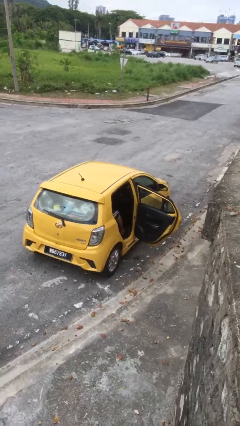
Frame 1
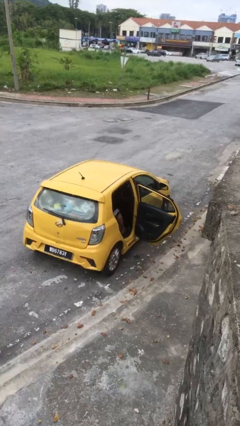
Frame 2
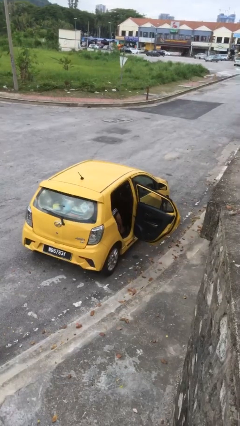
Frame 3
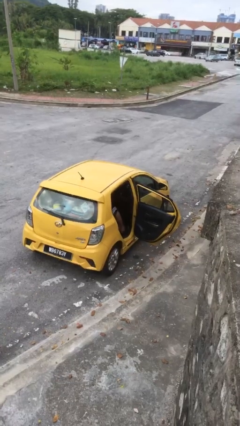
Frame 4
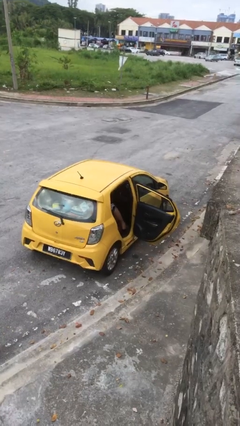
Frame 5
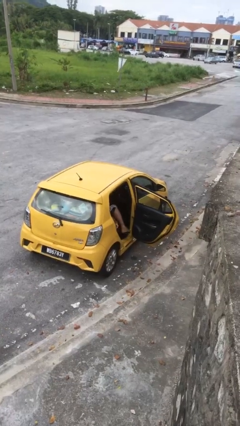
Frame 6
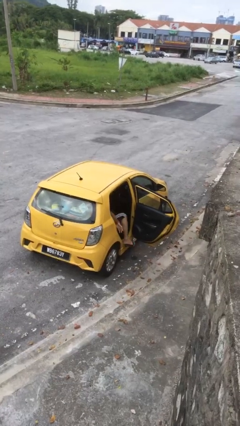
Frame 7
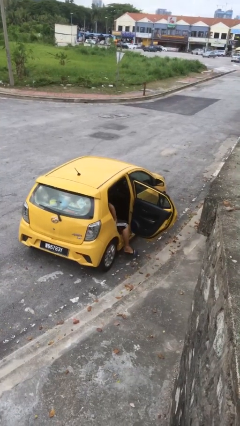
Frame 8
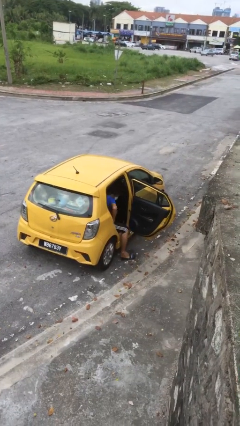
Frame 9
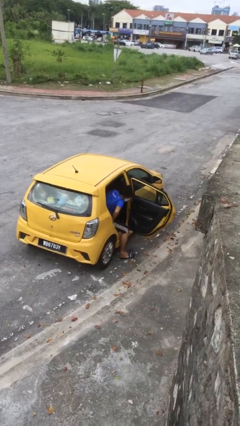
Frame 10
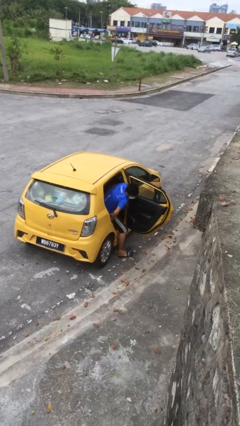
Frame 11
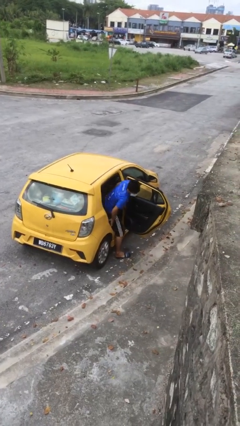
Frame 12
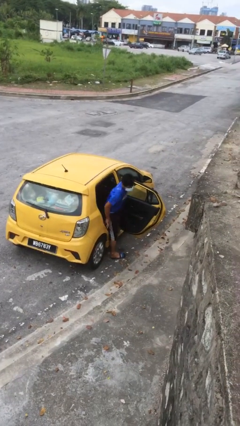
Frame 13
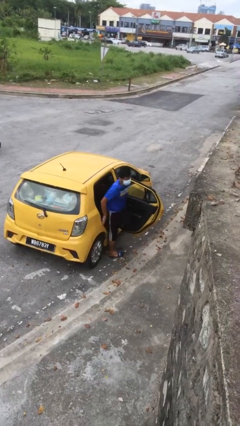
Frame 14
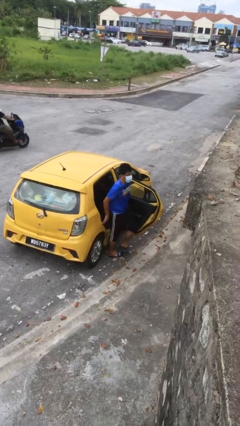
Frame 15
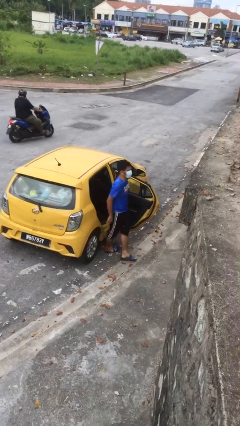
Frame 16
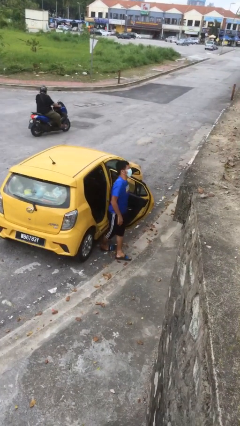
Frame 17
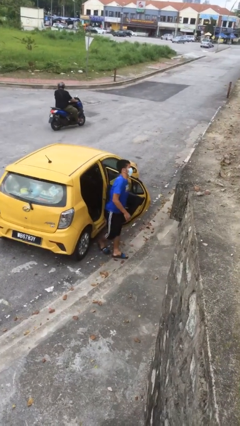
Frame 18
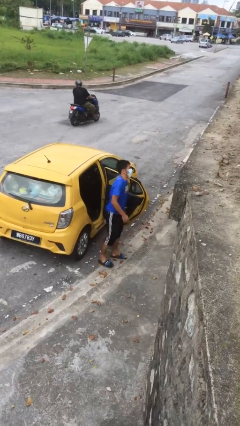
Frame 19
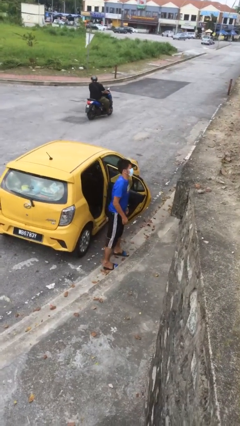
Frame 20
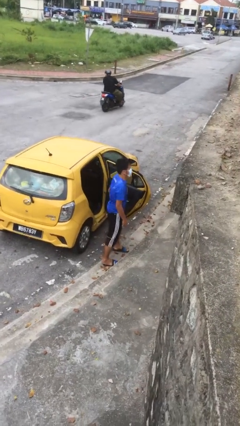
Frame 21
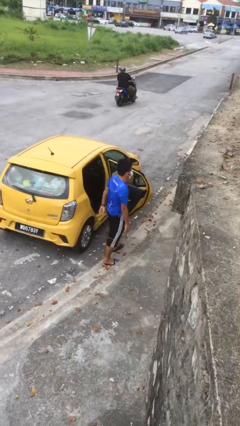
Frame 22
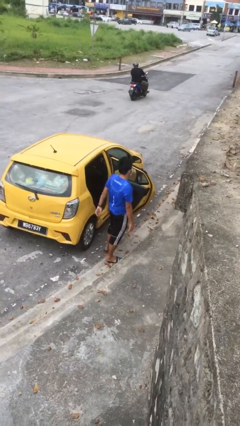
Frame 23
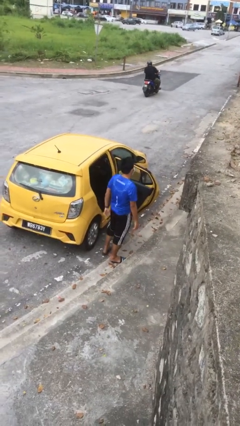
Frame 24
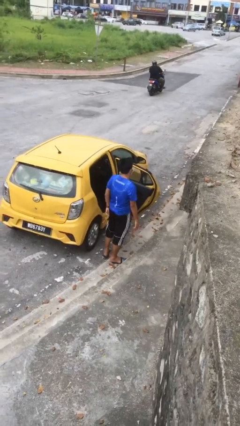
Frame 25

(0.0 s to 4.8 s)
person exits car

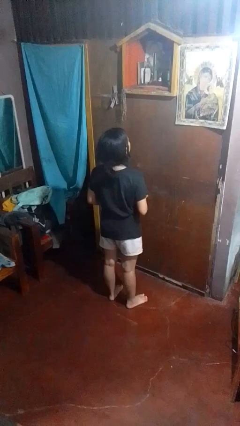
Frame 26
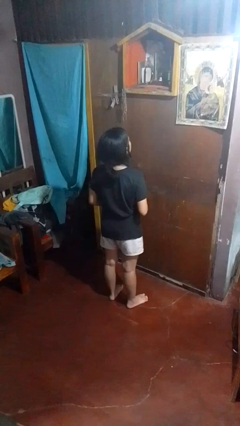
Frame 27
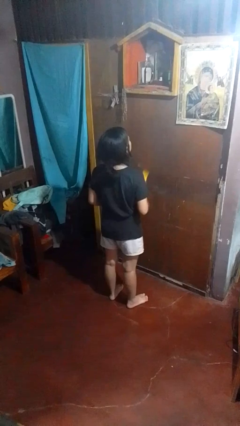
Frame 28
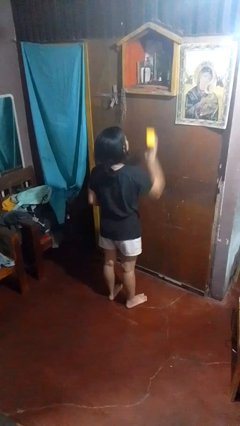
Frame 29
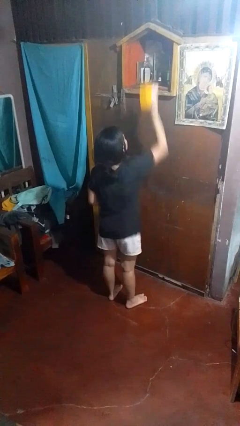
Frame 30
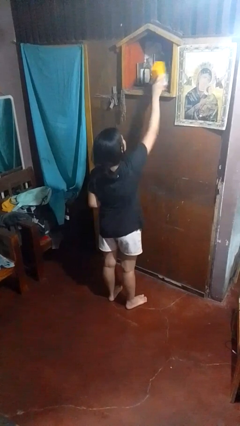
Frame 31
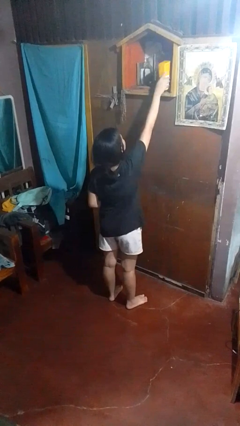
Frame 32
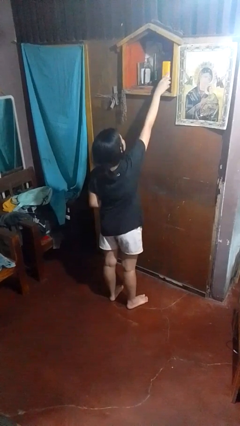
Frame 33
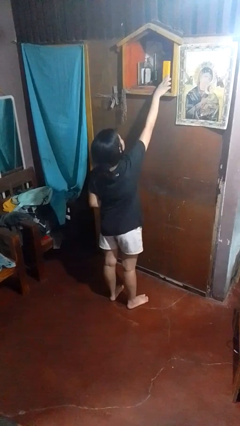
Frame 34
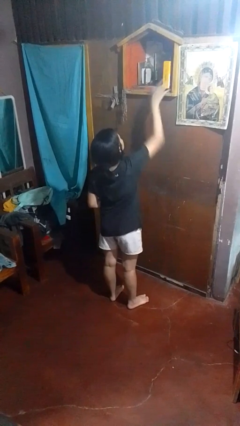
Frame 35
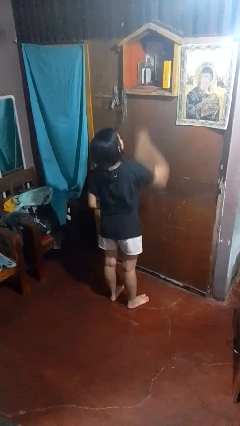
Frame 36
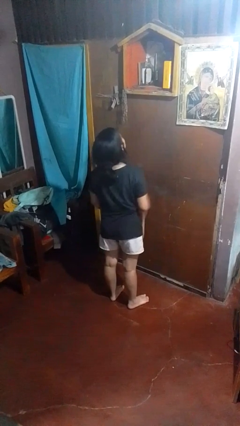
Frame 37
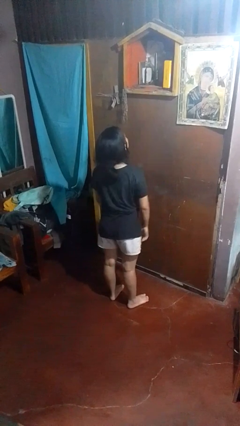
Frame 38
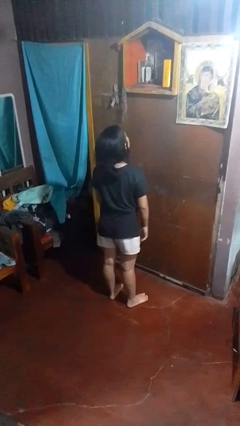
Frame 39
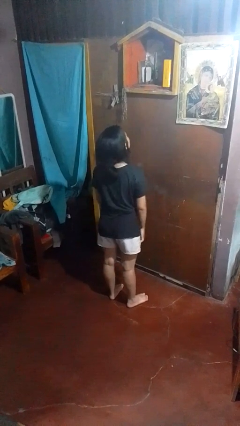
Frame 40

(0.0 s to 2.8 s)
person puts down object on shelf

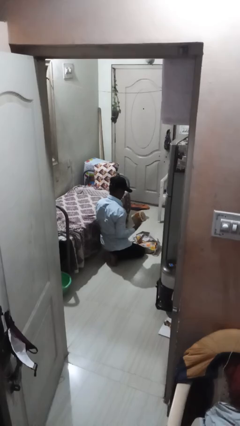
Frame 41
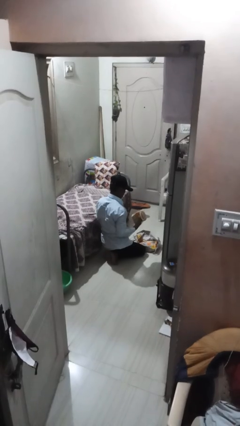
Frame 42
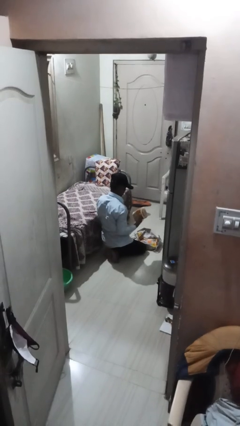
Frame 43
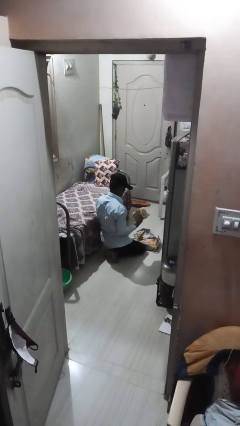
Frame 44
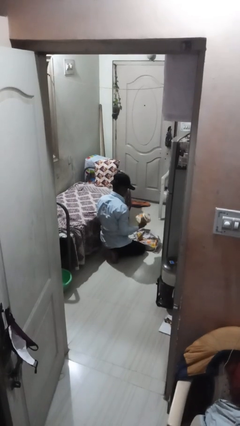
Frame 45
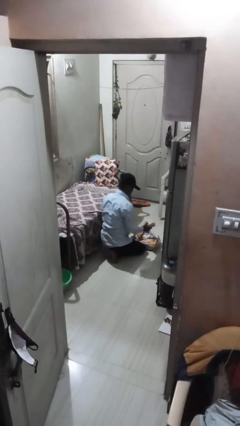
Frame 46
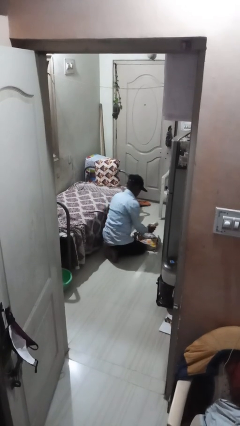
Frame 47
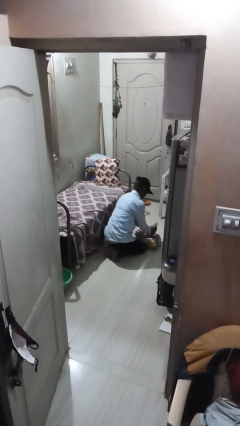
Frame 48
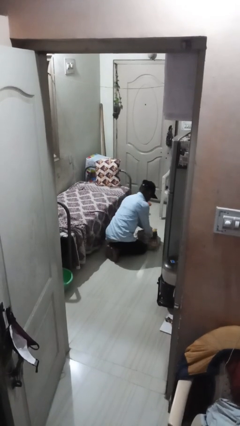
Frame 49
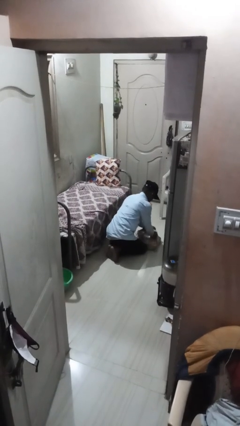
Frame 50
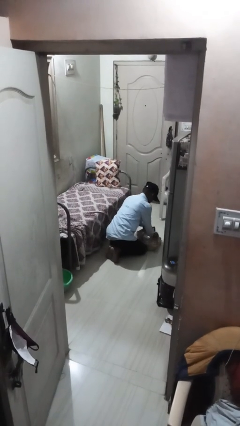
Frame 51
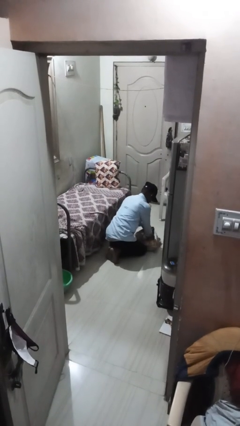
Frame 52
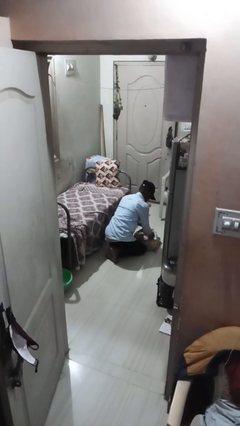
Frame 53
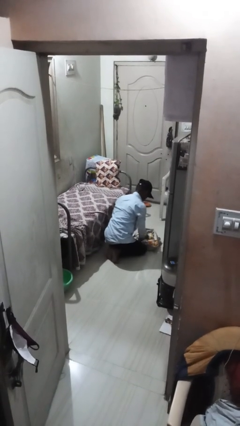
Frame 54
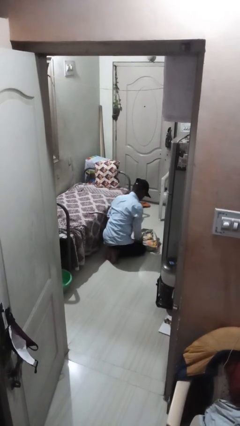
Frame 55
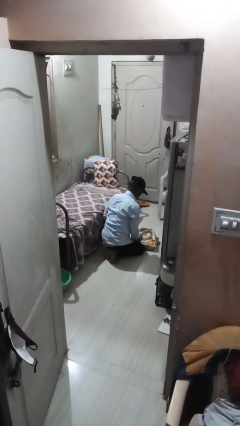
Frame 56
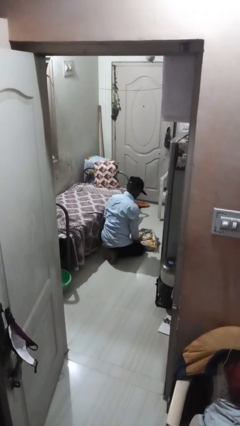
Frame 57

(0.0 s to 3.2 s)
person puts object into bag

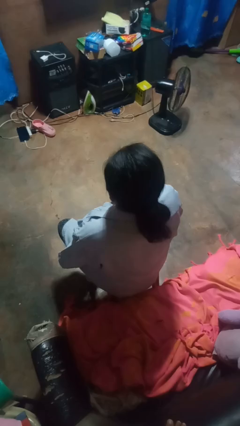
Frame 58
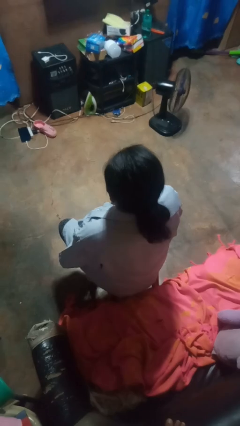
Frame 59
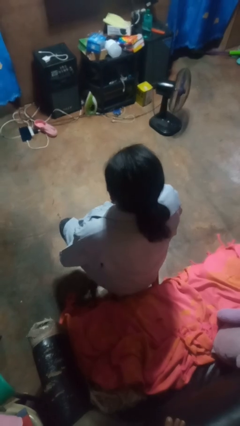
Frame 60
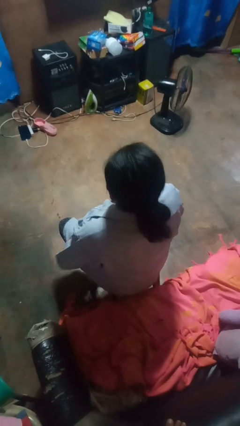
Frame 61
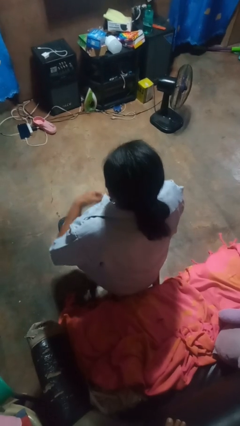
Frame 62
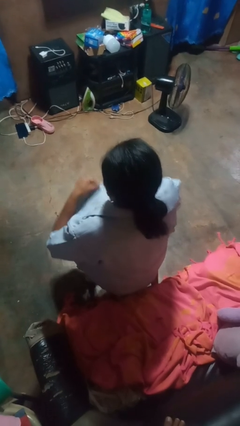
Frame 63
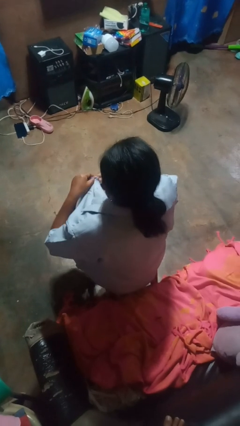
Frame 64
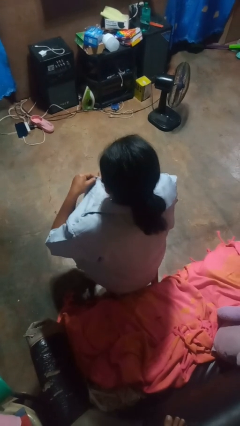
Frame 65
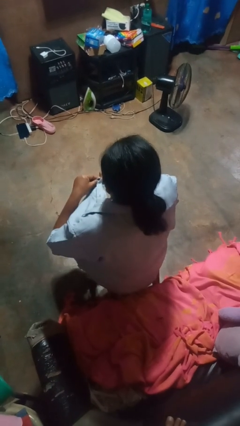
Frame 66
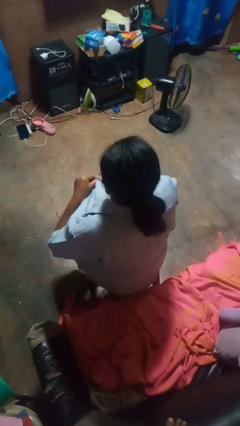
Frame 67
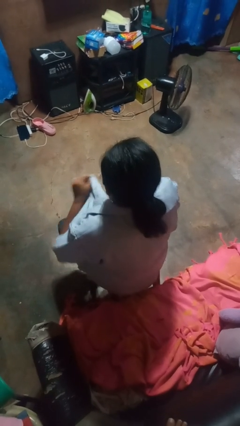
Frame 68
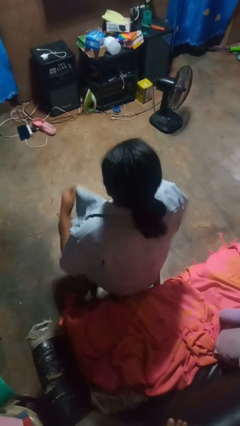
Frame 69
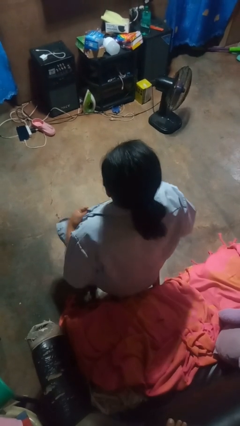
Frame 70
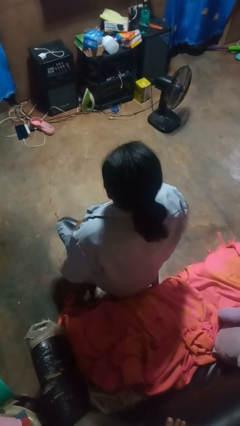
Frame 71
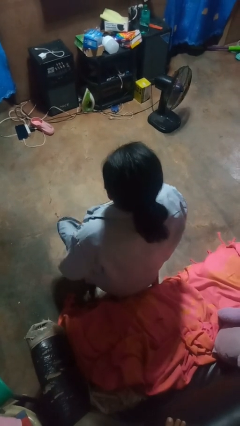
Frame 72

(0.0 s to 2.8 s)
person unbuttons shirt

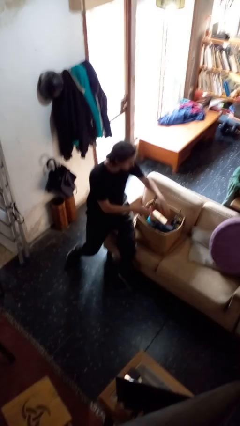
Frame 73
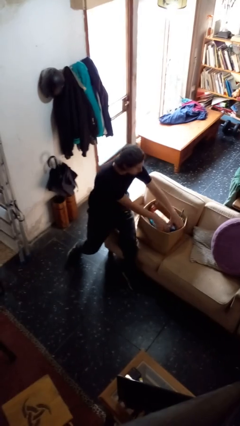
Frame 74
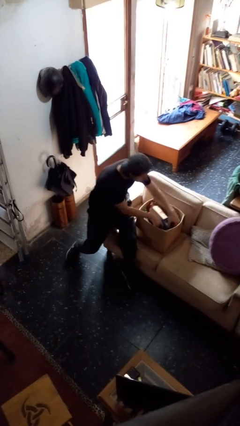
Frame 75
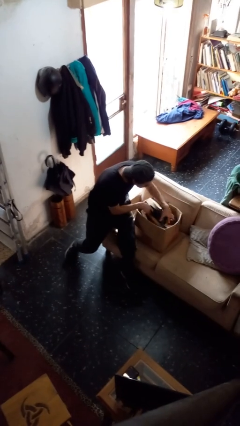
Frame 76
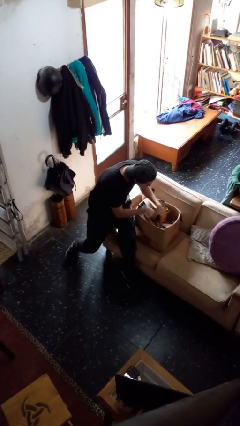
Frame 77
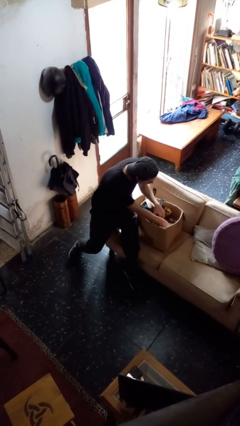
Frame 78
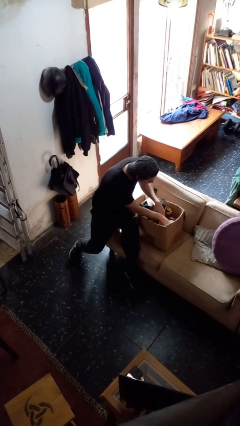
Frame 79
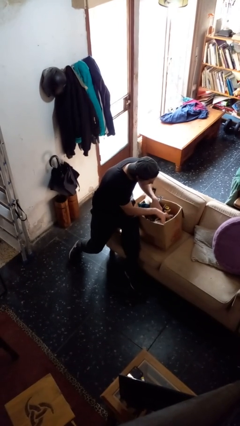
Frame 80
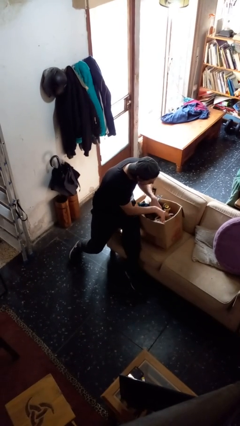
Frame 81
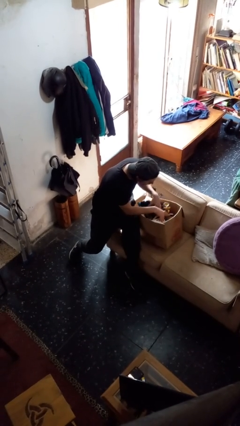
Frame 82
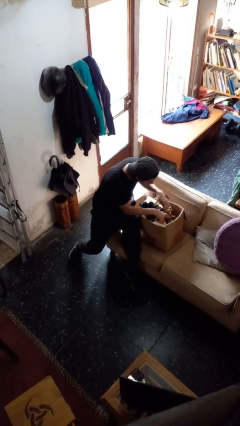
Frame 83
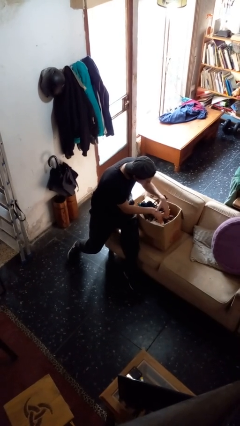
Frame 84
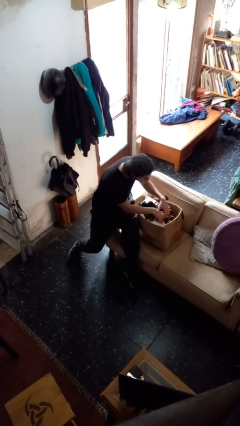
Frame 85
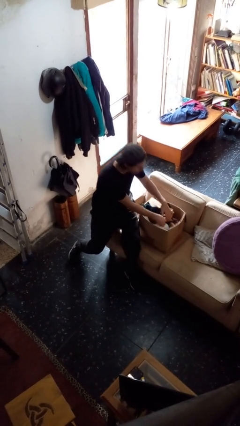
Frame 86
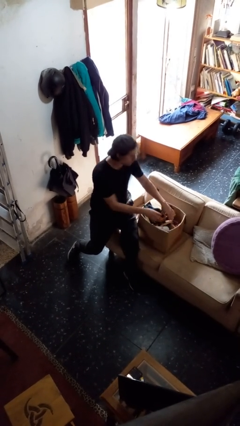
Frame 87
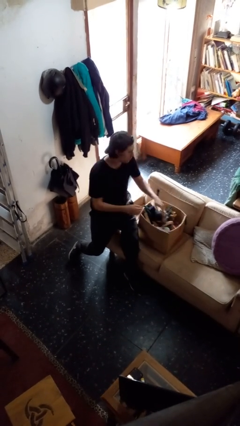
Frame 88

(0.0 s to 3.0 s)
person searches in box

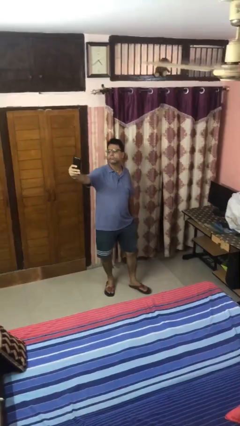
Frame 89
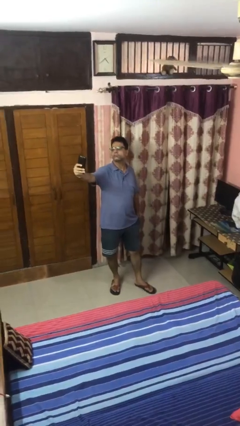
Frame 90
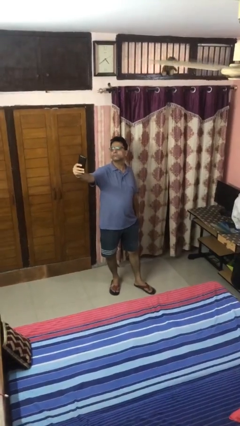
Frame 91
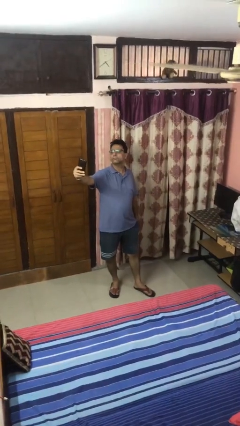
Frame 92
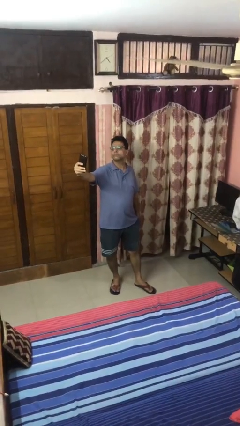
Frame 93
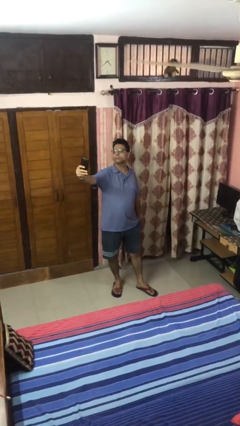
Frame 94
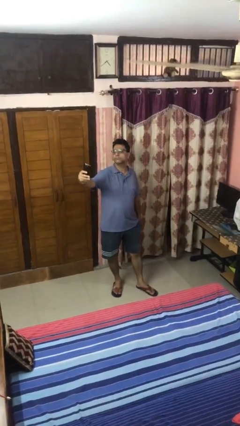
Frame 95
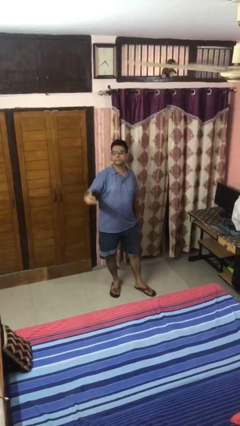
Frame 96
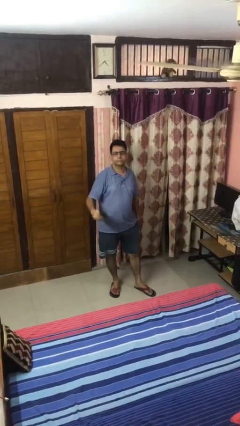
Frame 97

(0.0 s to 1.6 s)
person takes selfie
